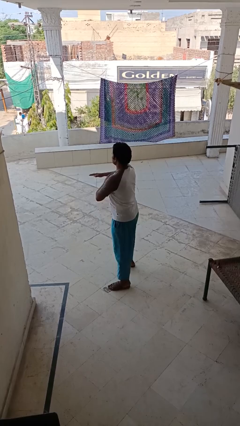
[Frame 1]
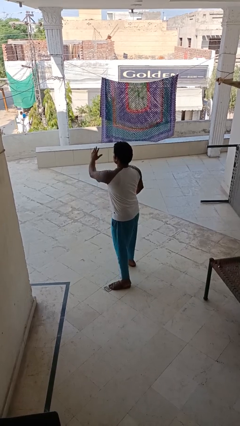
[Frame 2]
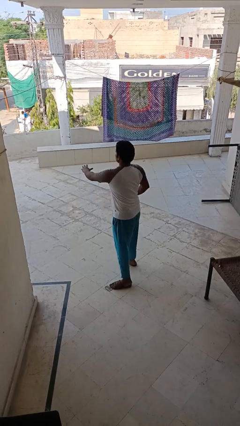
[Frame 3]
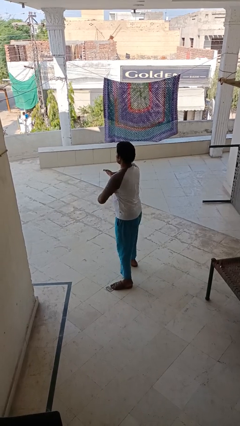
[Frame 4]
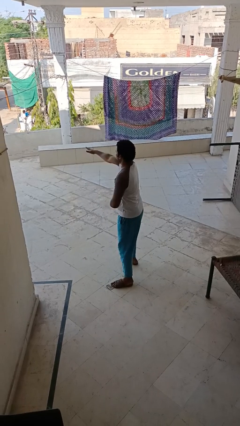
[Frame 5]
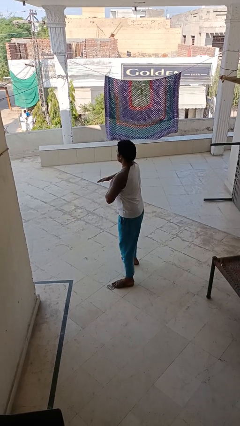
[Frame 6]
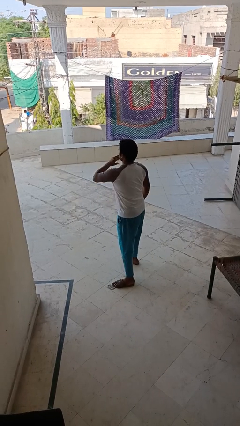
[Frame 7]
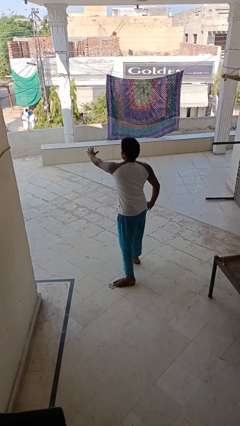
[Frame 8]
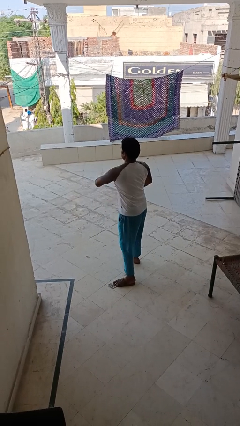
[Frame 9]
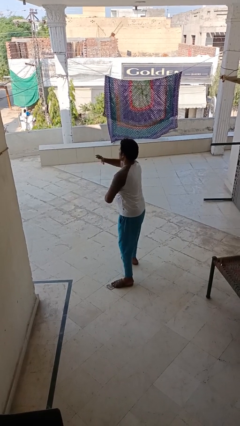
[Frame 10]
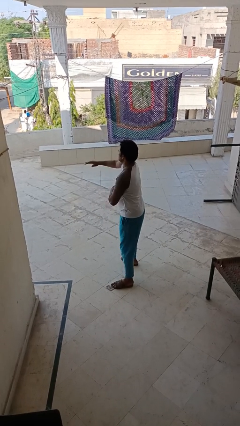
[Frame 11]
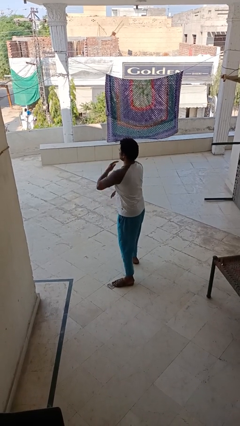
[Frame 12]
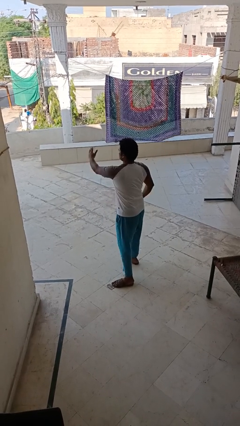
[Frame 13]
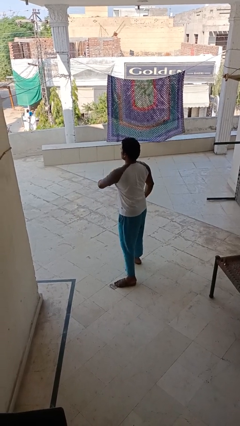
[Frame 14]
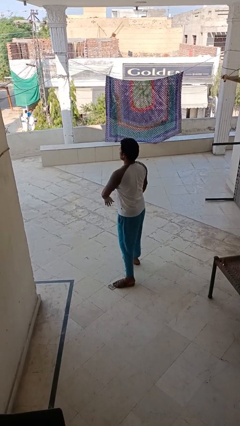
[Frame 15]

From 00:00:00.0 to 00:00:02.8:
person karate chop

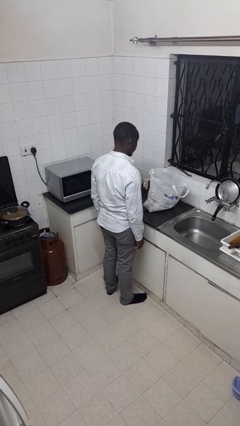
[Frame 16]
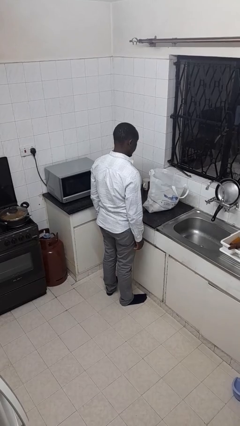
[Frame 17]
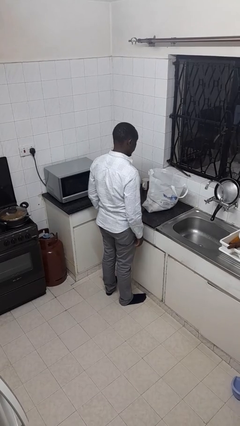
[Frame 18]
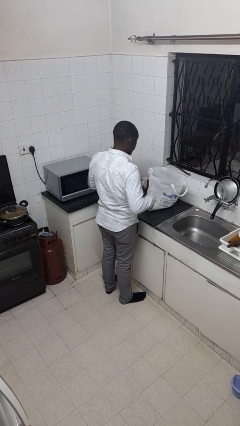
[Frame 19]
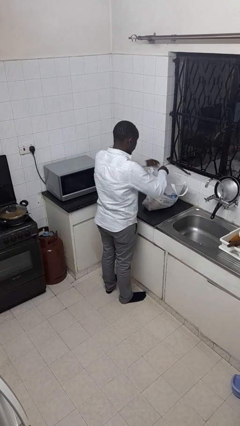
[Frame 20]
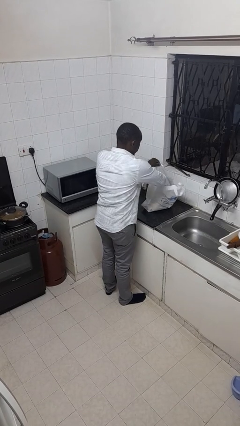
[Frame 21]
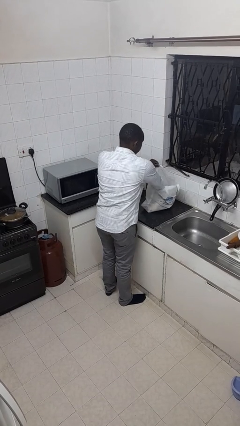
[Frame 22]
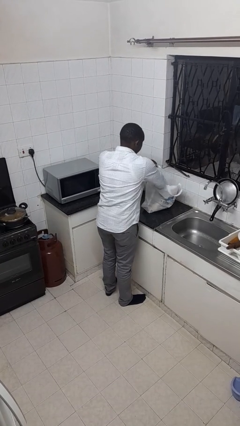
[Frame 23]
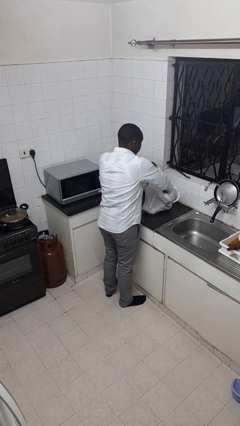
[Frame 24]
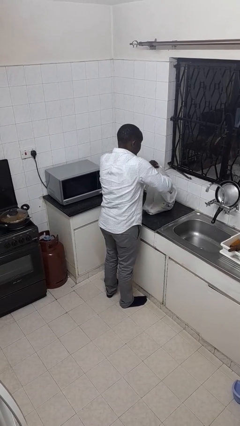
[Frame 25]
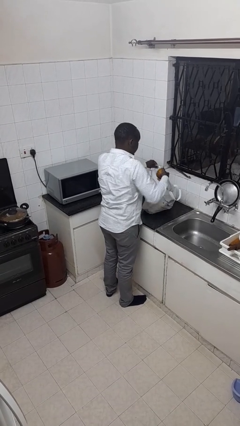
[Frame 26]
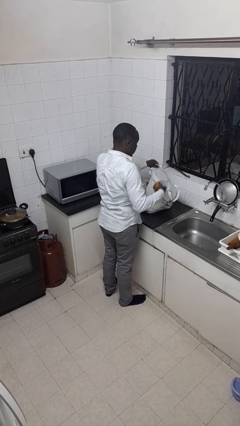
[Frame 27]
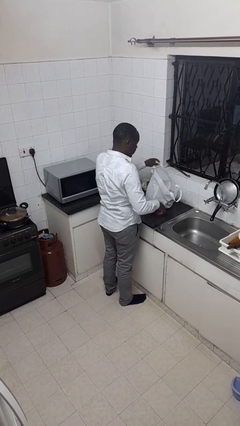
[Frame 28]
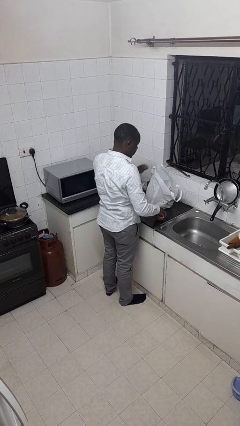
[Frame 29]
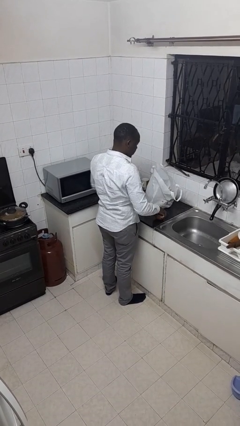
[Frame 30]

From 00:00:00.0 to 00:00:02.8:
person takes object from bag

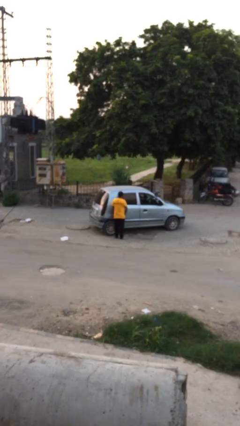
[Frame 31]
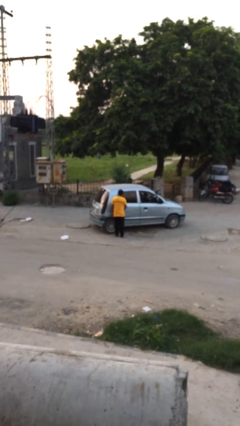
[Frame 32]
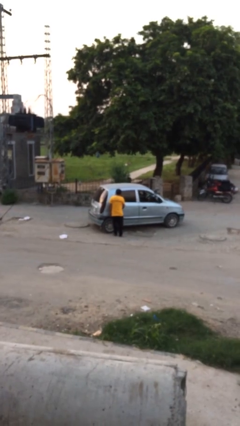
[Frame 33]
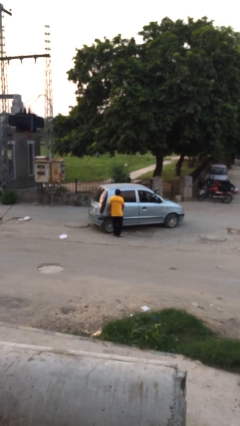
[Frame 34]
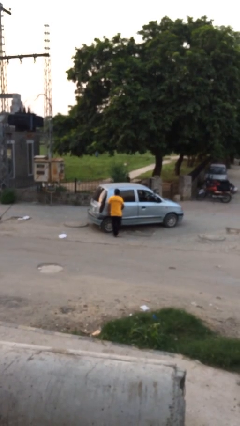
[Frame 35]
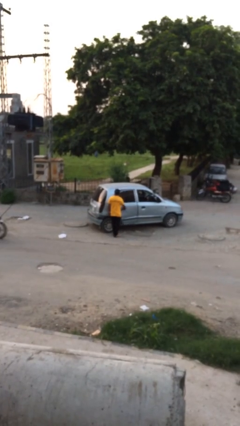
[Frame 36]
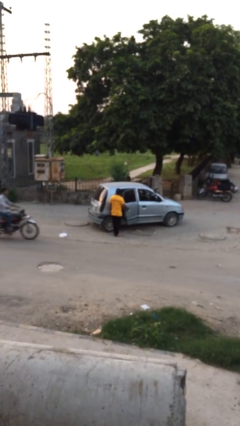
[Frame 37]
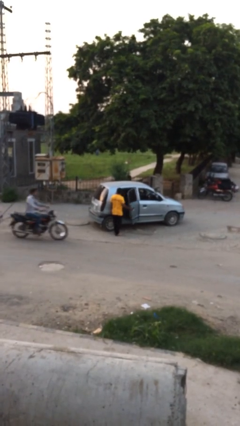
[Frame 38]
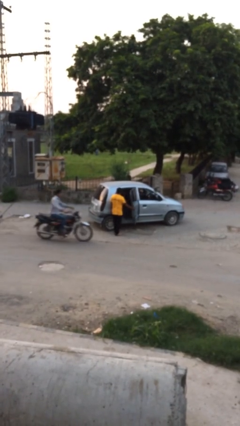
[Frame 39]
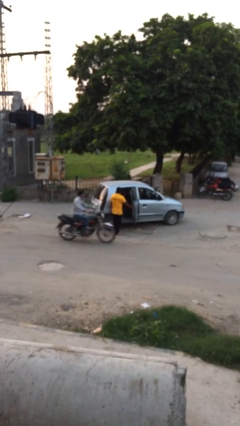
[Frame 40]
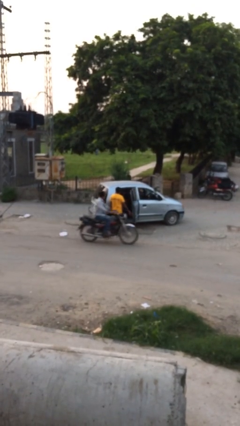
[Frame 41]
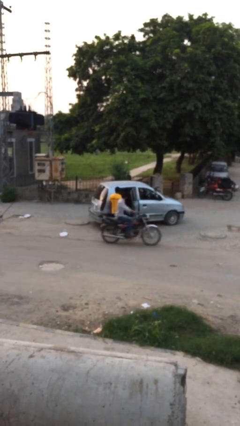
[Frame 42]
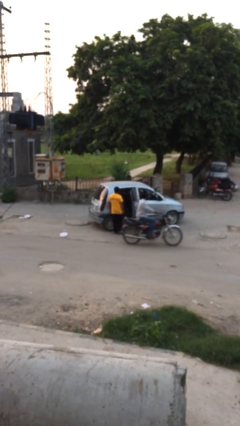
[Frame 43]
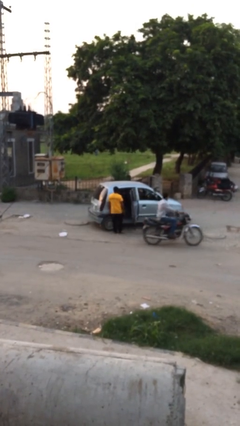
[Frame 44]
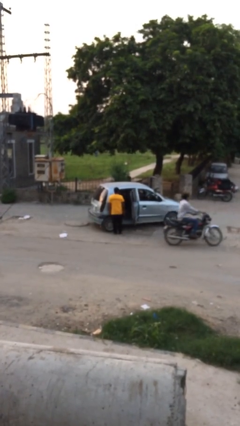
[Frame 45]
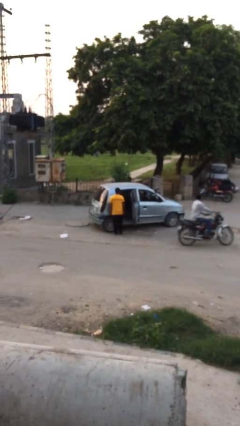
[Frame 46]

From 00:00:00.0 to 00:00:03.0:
person opens car door

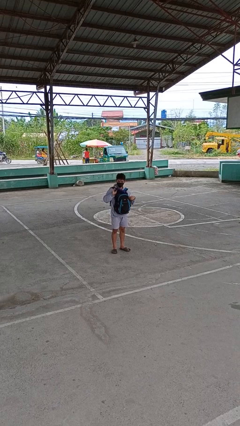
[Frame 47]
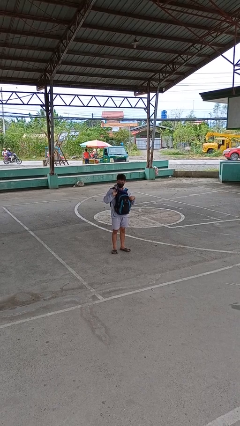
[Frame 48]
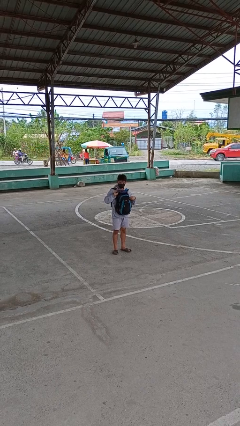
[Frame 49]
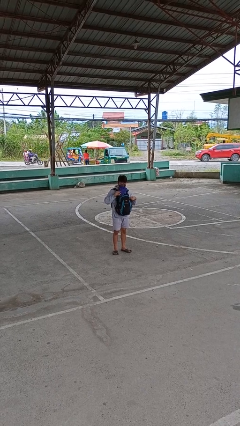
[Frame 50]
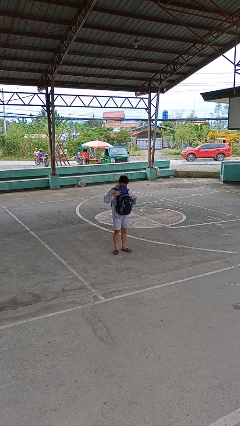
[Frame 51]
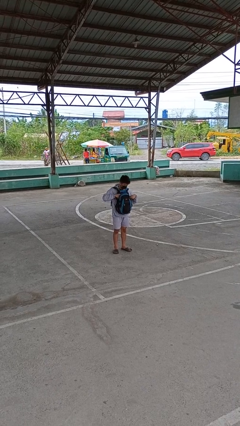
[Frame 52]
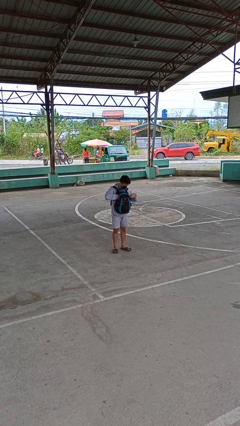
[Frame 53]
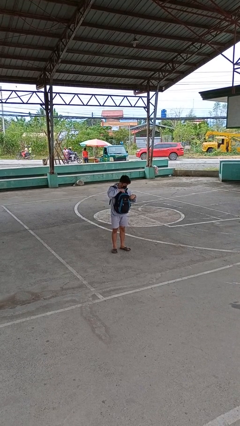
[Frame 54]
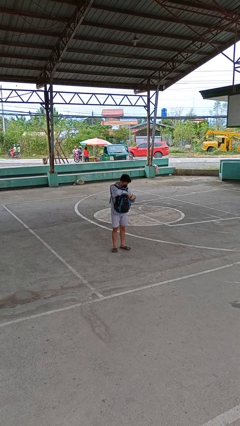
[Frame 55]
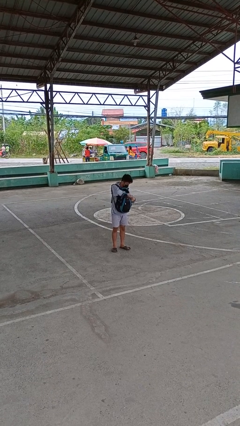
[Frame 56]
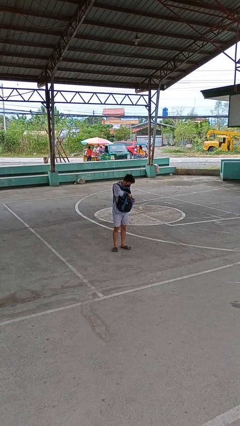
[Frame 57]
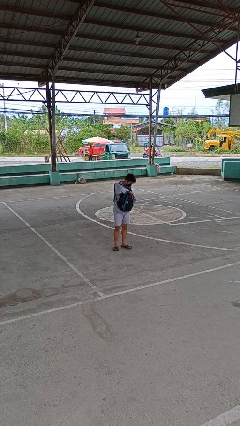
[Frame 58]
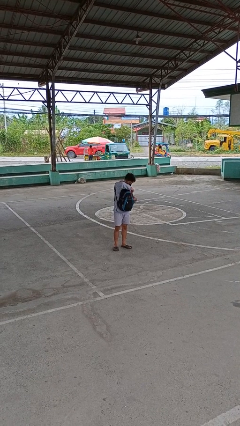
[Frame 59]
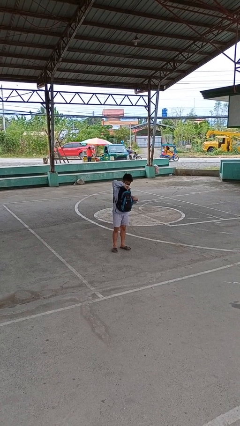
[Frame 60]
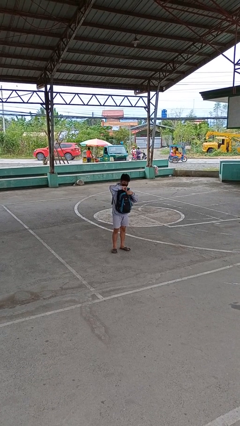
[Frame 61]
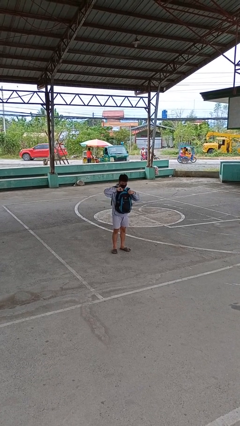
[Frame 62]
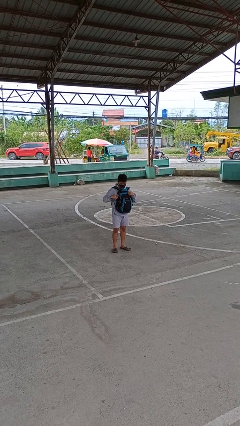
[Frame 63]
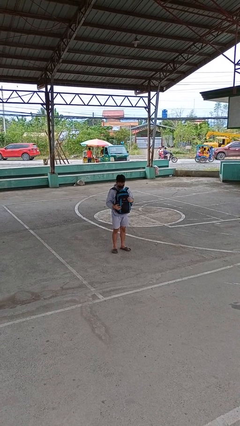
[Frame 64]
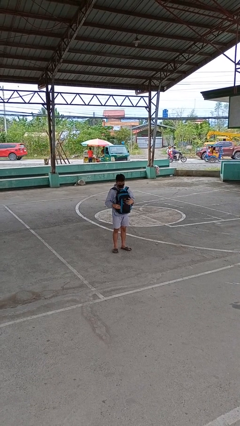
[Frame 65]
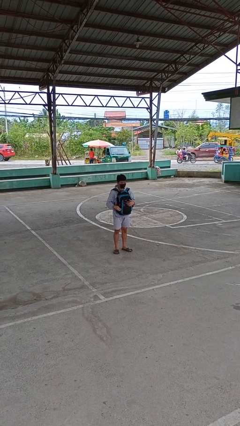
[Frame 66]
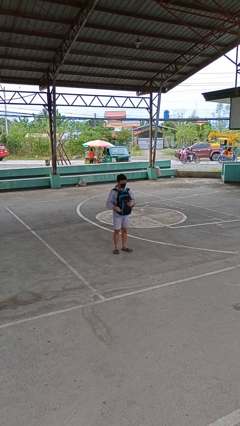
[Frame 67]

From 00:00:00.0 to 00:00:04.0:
person puts object into backpack

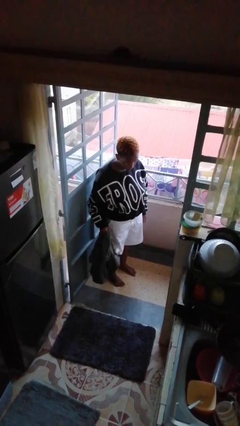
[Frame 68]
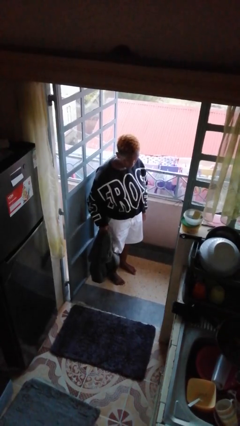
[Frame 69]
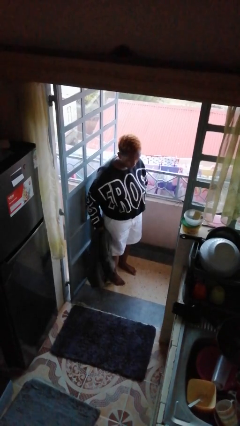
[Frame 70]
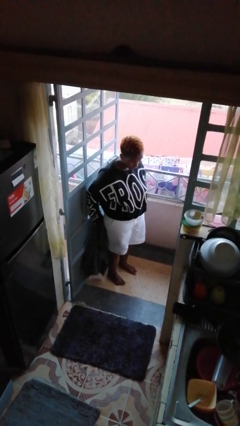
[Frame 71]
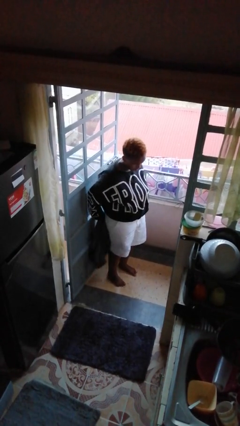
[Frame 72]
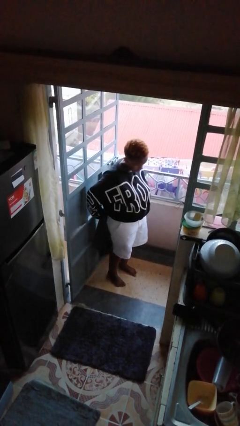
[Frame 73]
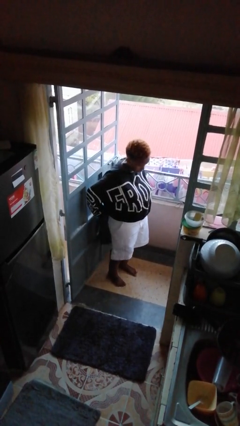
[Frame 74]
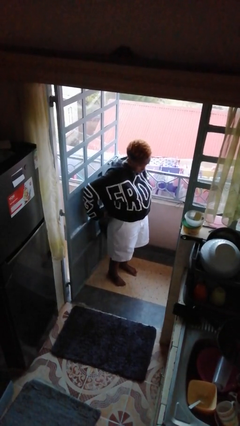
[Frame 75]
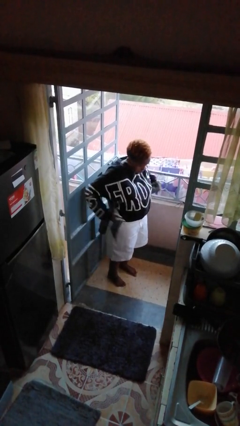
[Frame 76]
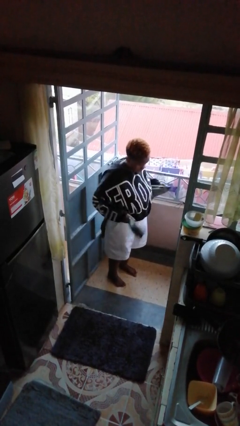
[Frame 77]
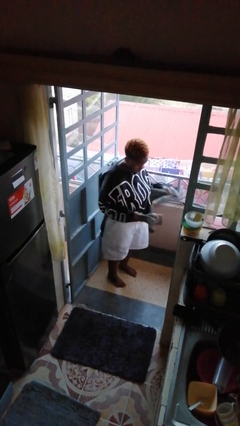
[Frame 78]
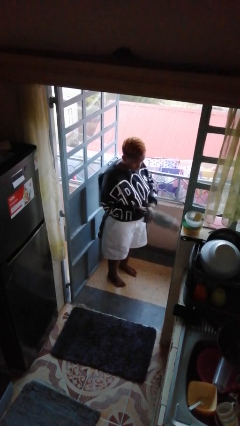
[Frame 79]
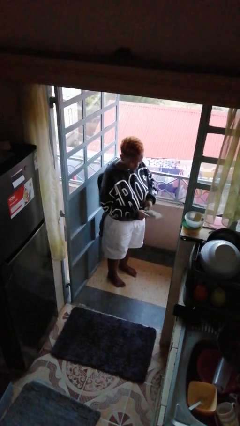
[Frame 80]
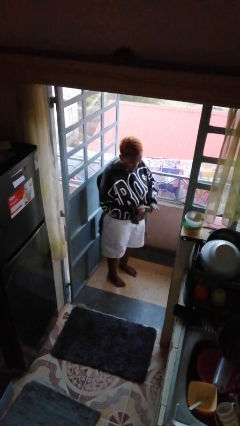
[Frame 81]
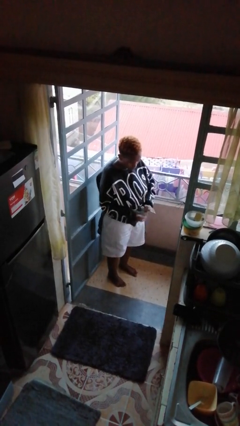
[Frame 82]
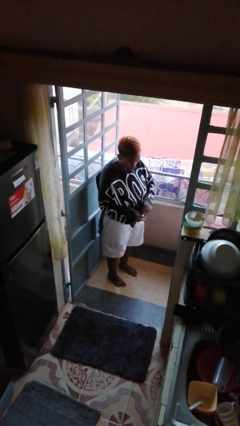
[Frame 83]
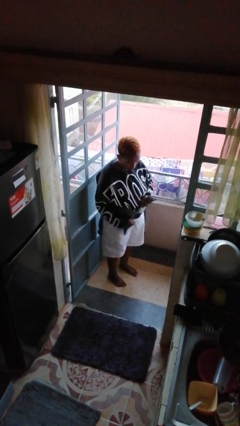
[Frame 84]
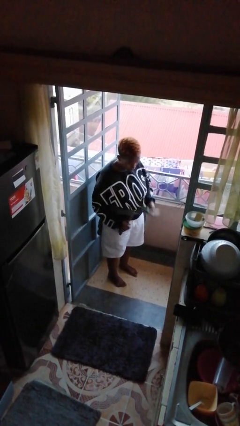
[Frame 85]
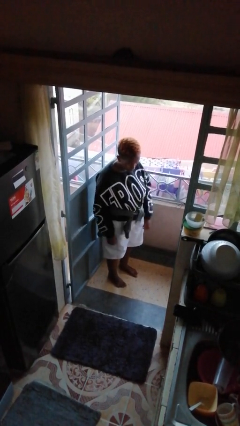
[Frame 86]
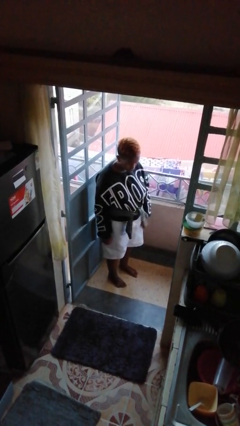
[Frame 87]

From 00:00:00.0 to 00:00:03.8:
person ties jacket around waist

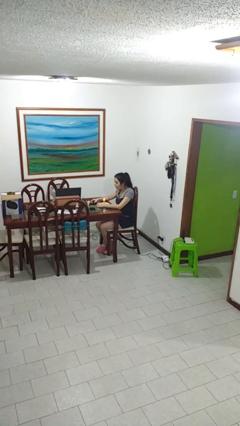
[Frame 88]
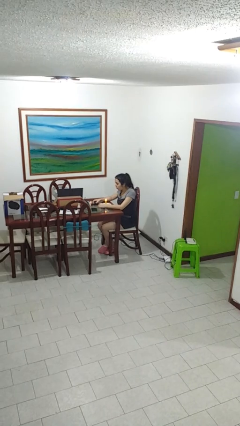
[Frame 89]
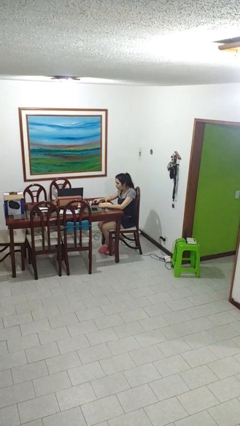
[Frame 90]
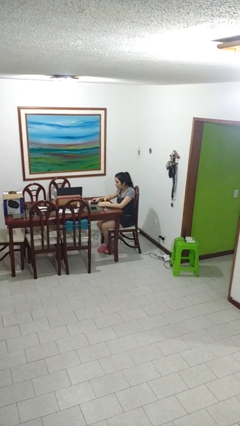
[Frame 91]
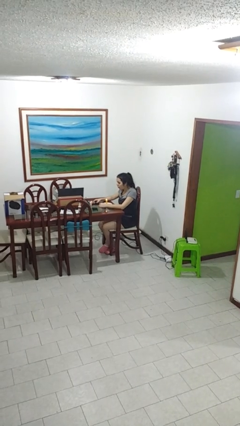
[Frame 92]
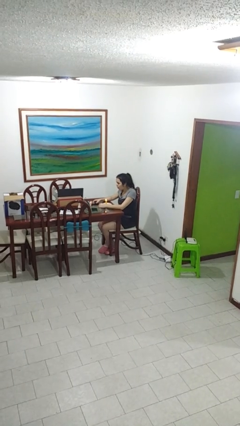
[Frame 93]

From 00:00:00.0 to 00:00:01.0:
person extinguishes candle

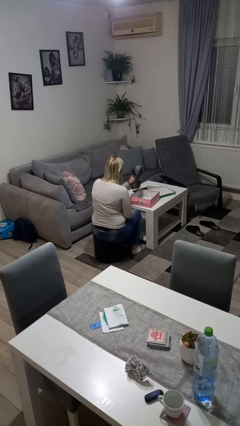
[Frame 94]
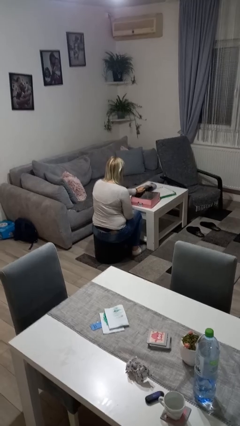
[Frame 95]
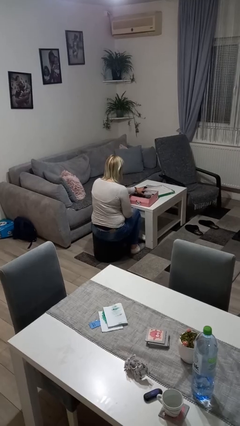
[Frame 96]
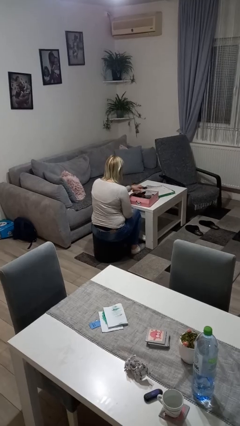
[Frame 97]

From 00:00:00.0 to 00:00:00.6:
person puts object into box
